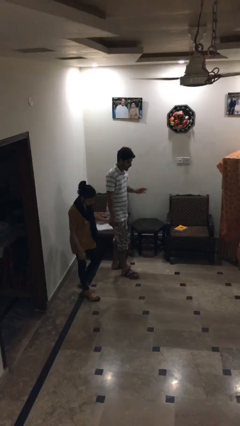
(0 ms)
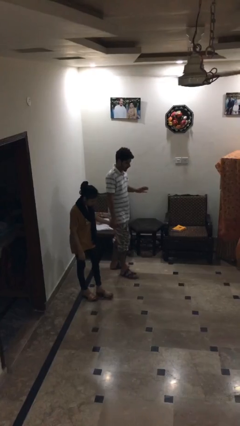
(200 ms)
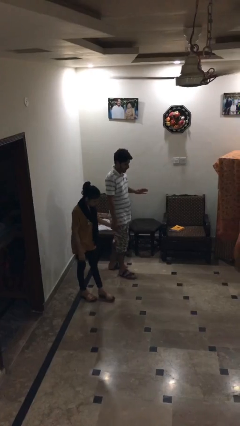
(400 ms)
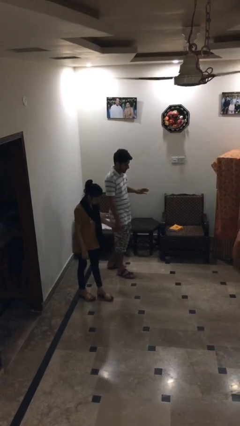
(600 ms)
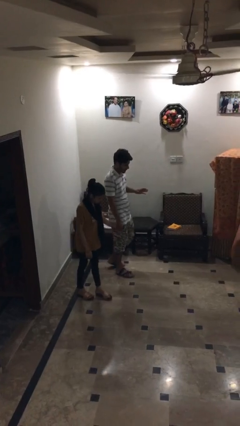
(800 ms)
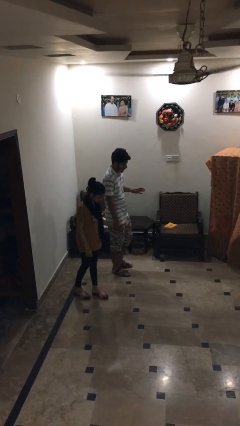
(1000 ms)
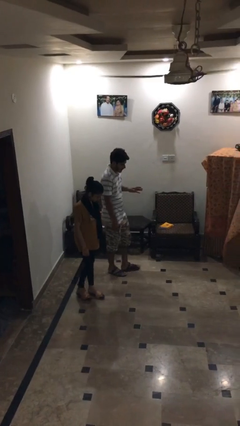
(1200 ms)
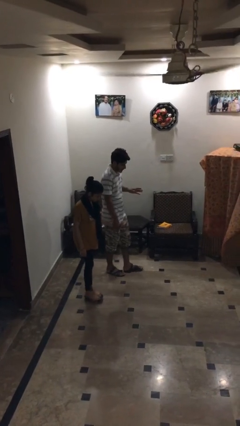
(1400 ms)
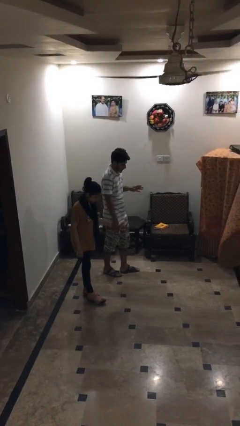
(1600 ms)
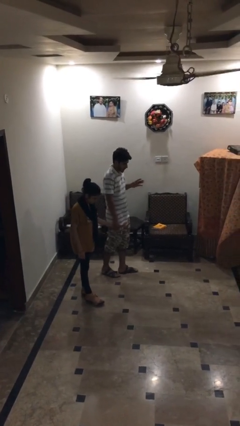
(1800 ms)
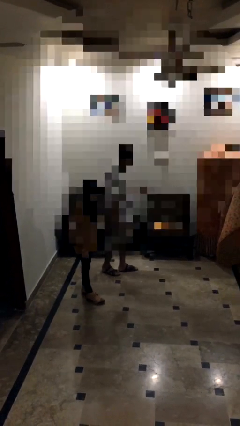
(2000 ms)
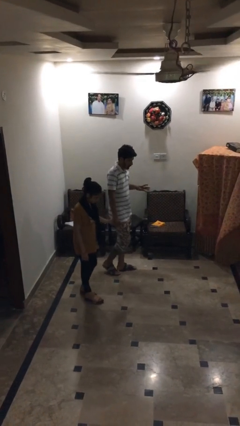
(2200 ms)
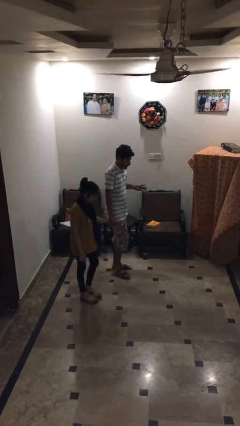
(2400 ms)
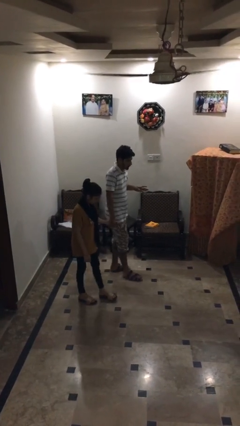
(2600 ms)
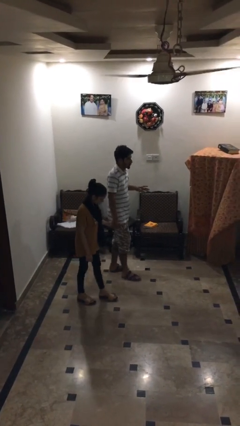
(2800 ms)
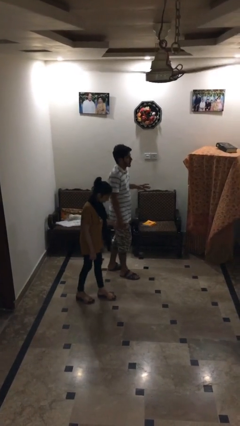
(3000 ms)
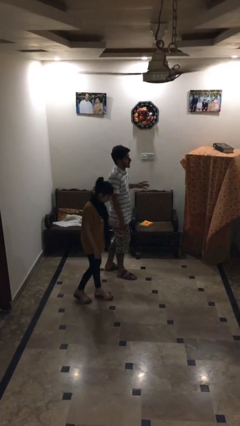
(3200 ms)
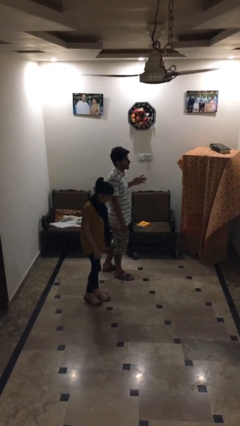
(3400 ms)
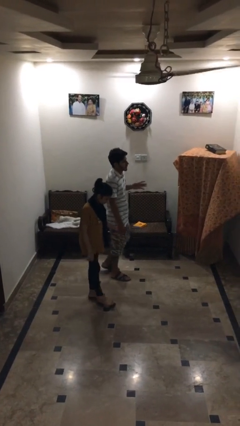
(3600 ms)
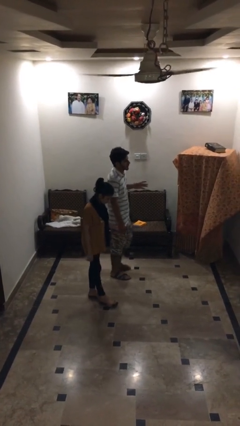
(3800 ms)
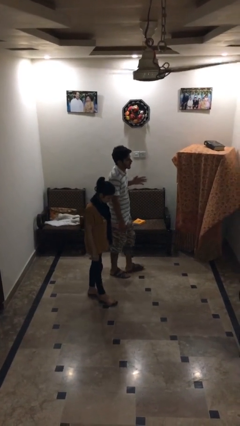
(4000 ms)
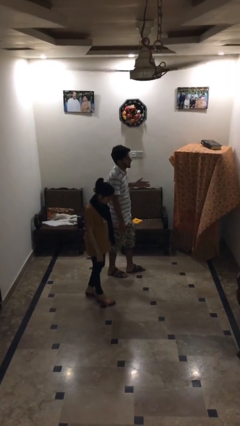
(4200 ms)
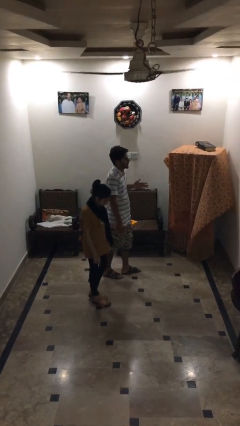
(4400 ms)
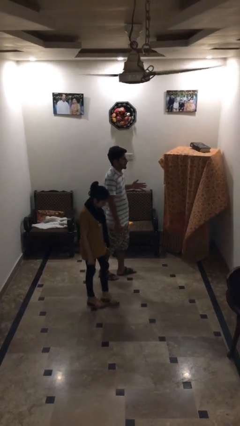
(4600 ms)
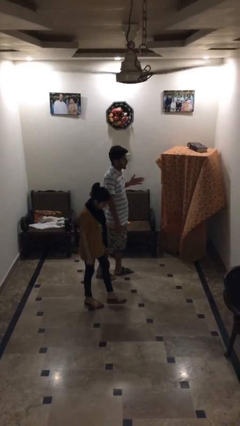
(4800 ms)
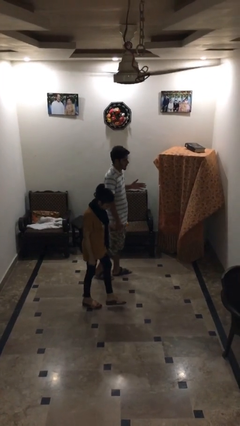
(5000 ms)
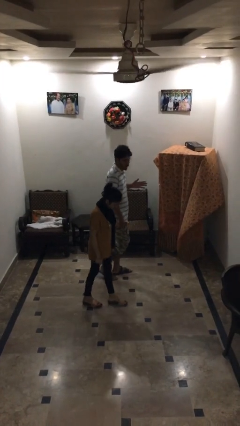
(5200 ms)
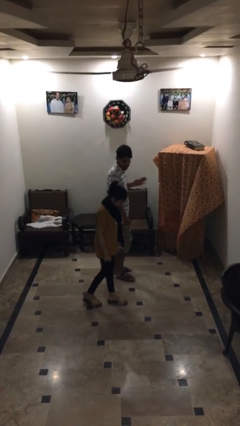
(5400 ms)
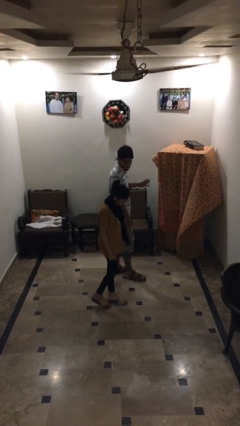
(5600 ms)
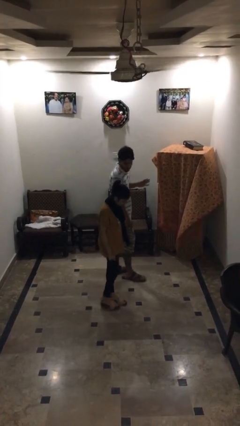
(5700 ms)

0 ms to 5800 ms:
person holds hand

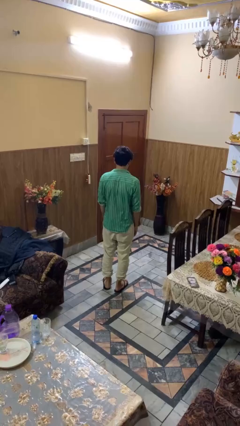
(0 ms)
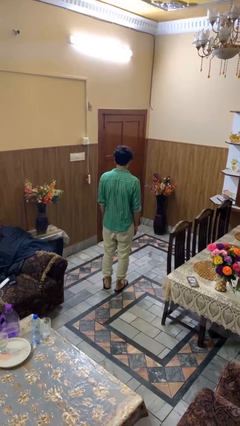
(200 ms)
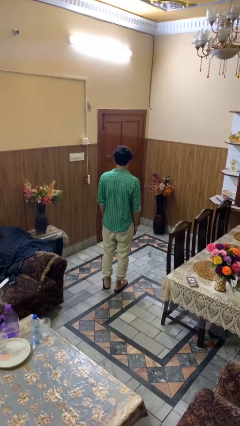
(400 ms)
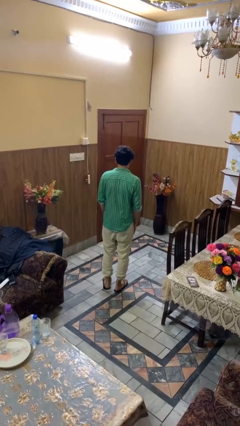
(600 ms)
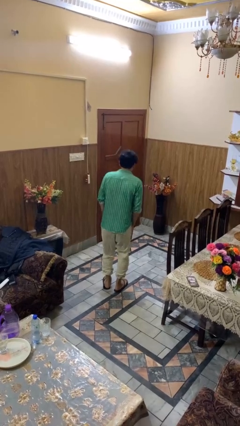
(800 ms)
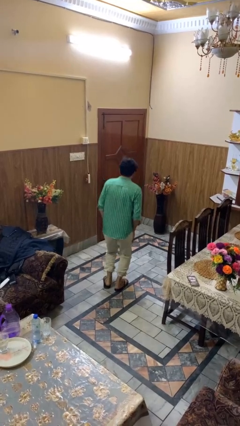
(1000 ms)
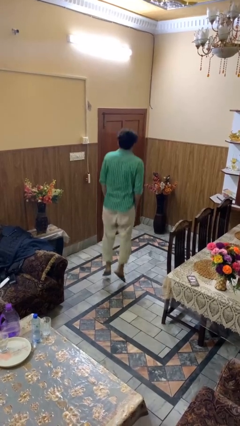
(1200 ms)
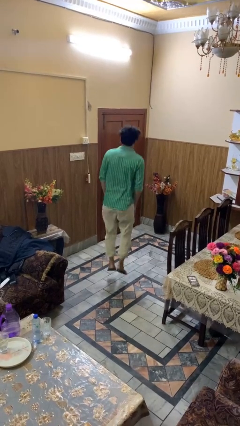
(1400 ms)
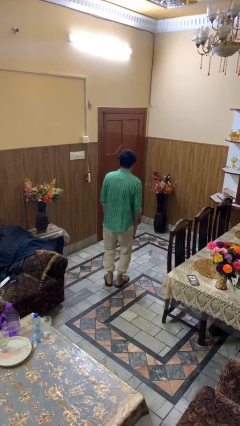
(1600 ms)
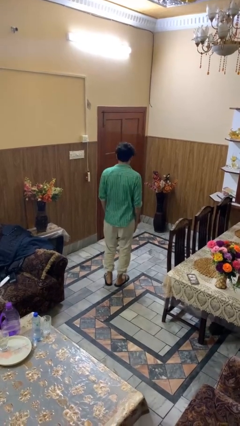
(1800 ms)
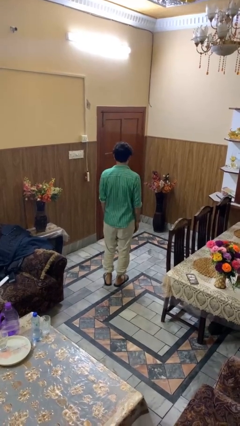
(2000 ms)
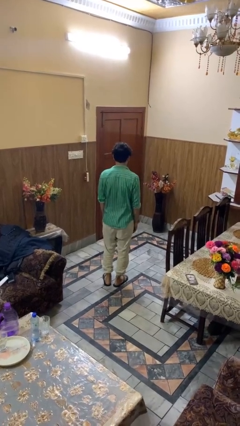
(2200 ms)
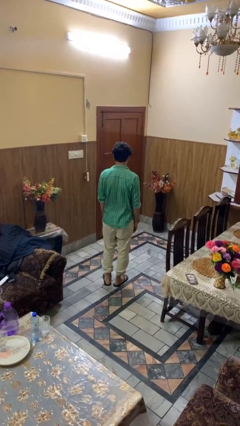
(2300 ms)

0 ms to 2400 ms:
person jumps

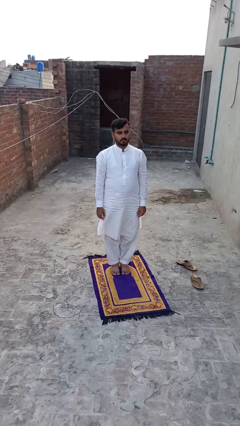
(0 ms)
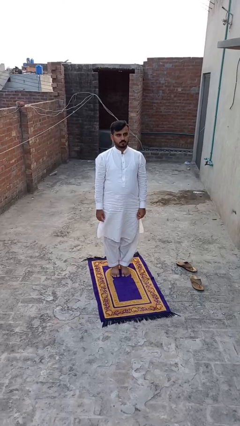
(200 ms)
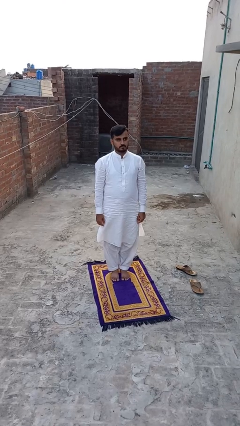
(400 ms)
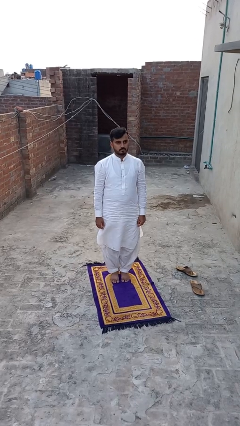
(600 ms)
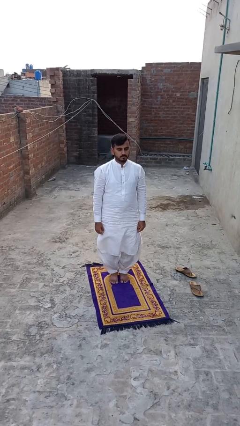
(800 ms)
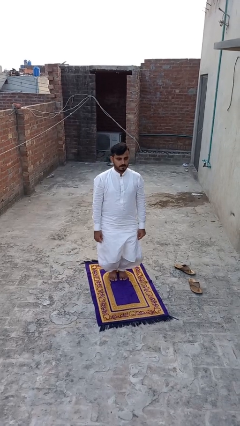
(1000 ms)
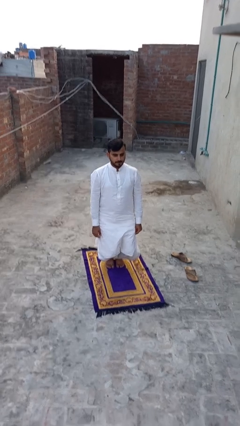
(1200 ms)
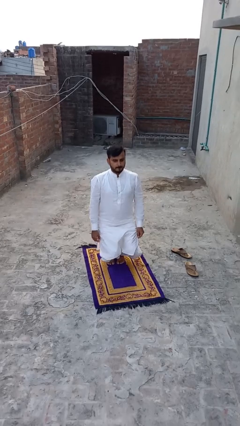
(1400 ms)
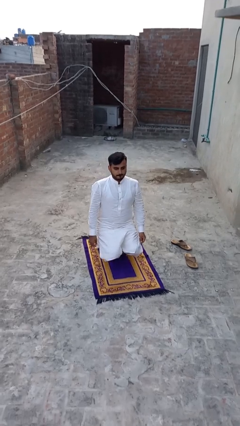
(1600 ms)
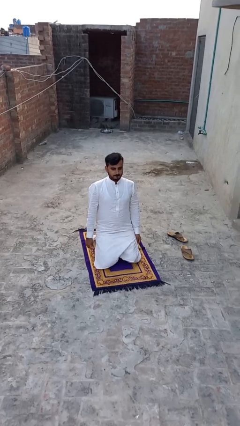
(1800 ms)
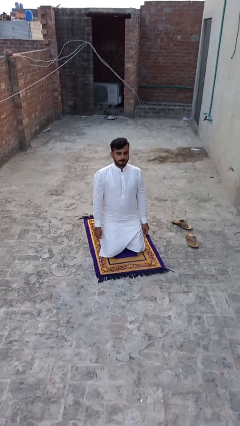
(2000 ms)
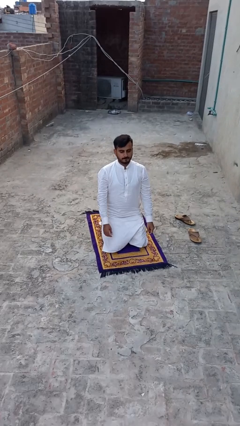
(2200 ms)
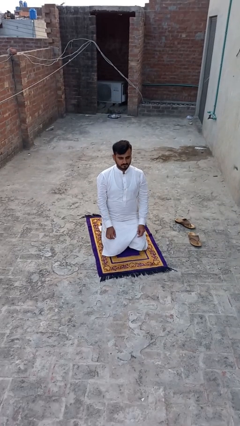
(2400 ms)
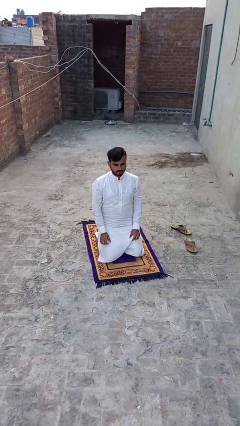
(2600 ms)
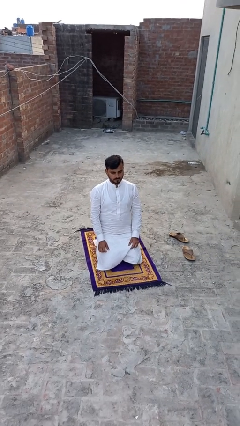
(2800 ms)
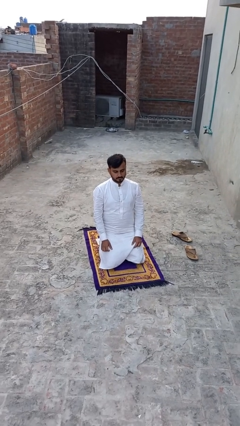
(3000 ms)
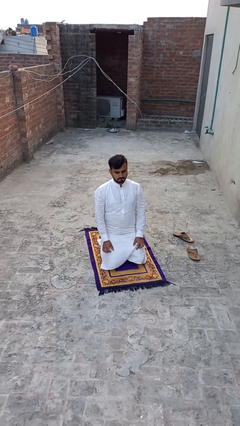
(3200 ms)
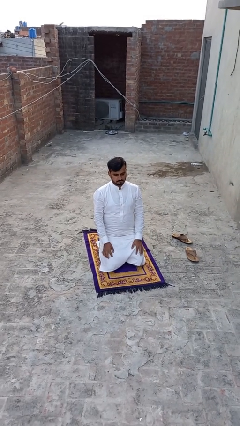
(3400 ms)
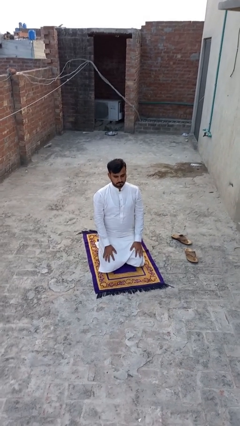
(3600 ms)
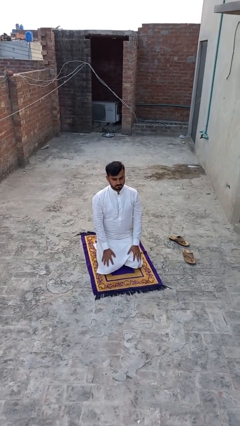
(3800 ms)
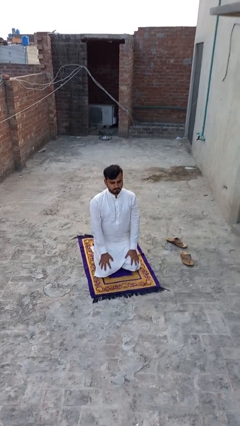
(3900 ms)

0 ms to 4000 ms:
person kneels

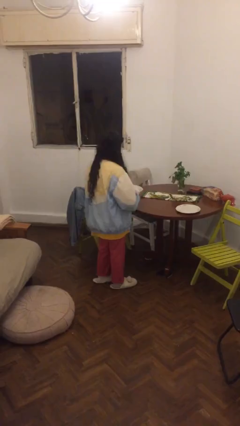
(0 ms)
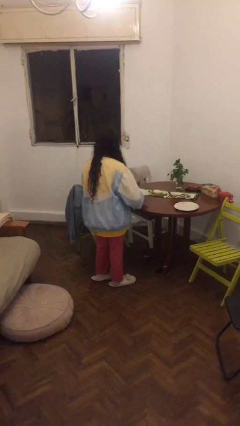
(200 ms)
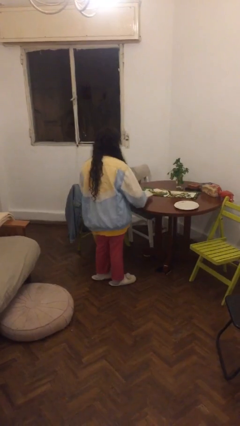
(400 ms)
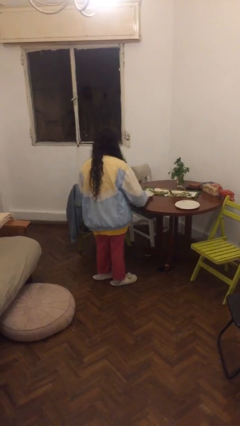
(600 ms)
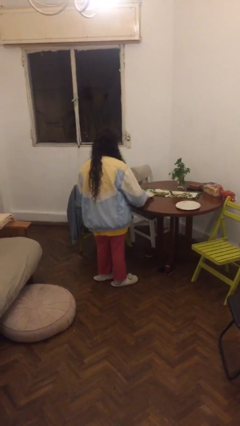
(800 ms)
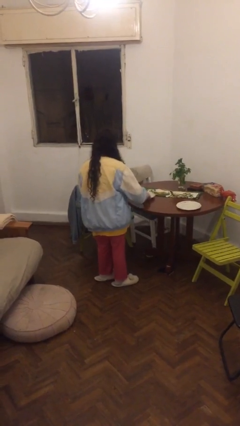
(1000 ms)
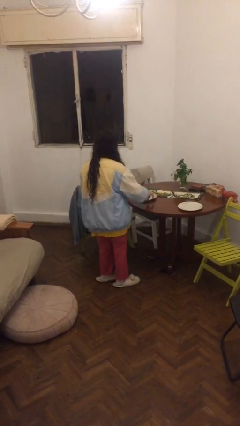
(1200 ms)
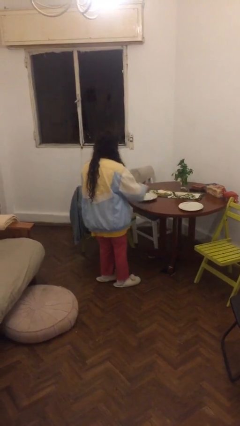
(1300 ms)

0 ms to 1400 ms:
person sets table

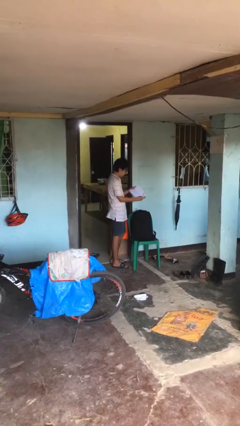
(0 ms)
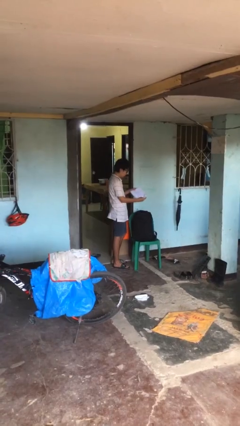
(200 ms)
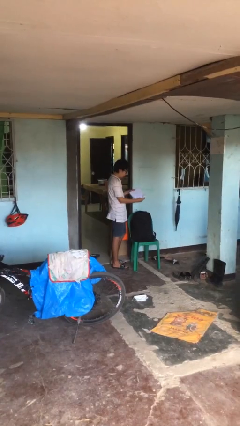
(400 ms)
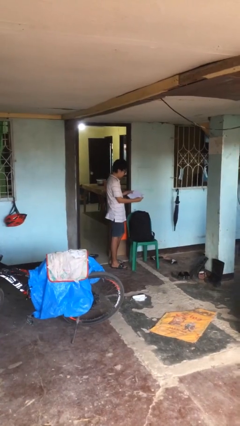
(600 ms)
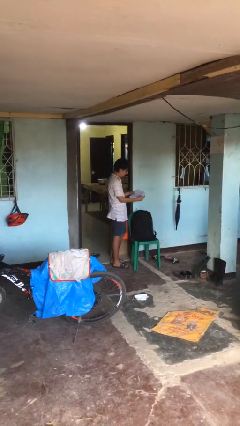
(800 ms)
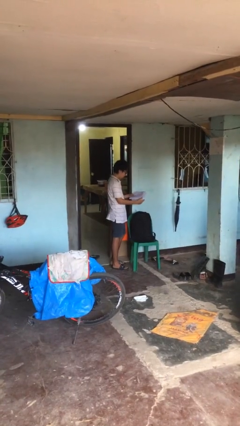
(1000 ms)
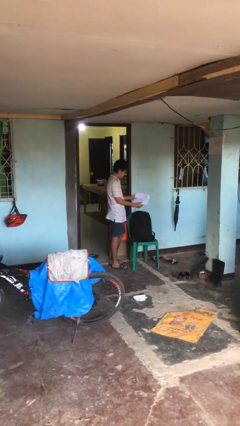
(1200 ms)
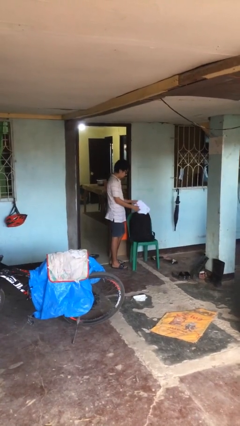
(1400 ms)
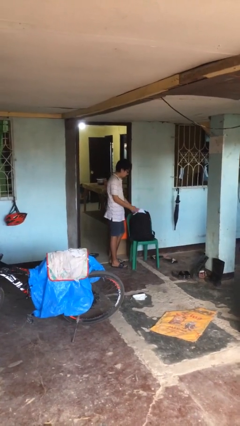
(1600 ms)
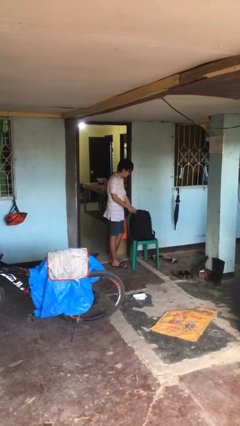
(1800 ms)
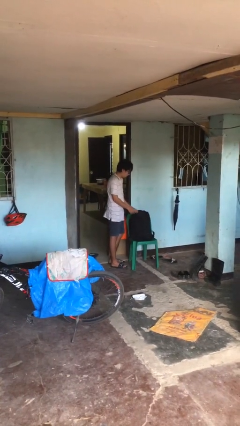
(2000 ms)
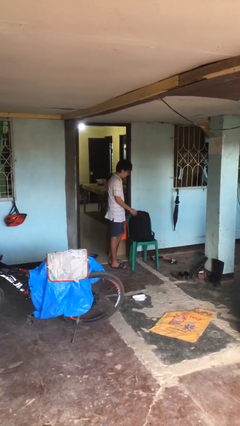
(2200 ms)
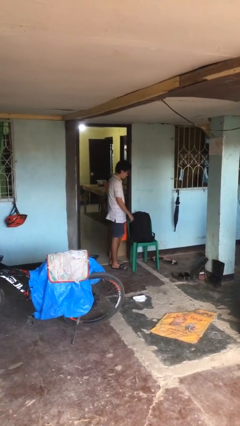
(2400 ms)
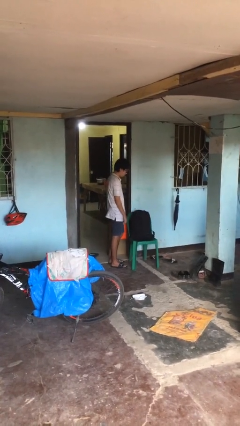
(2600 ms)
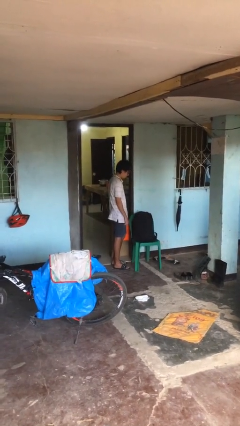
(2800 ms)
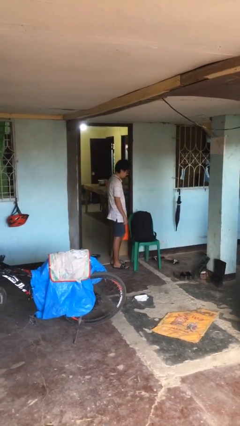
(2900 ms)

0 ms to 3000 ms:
person puts object into backpack

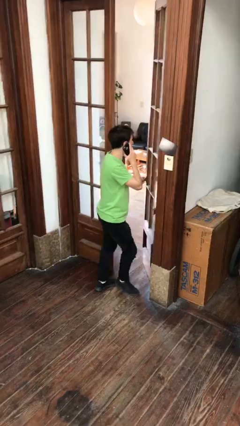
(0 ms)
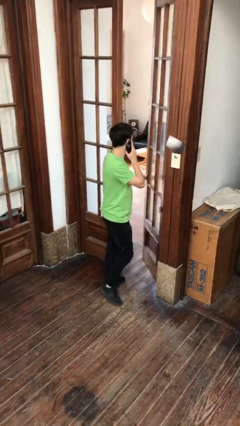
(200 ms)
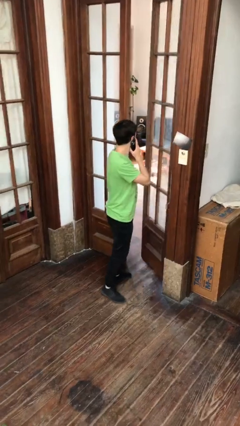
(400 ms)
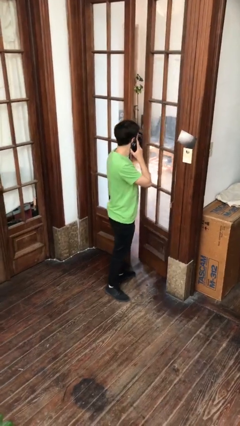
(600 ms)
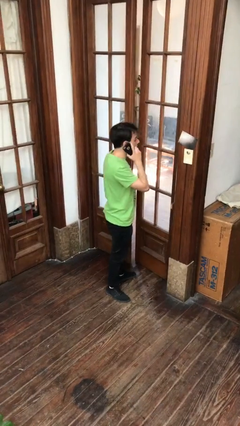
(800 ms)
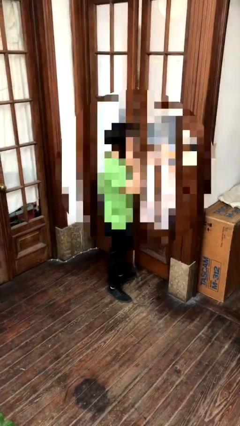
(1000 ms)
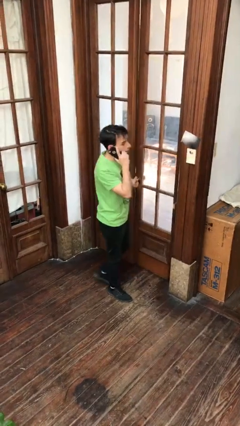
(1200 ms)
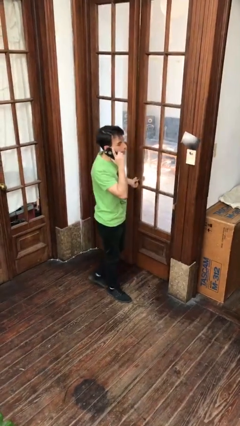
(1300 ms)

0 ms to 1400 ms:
person closes facility door
